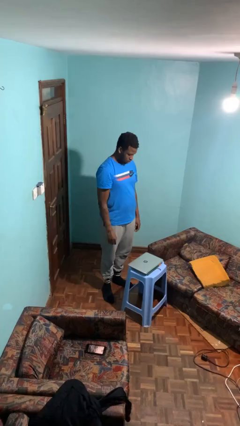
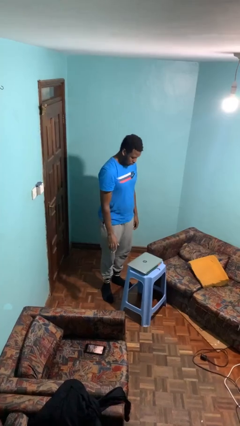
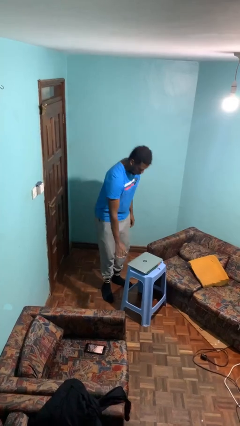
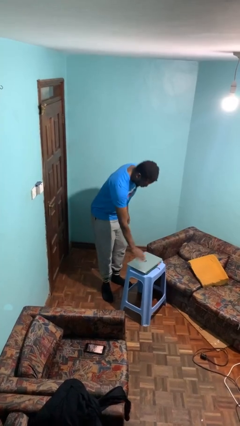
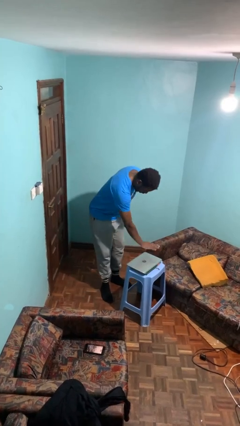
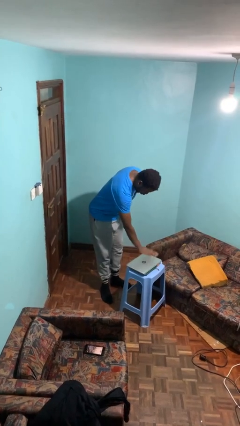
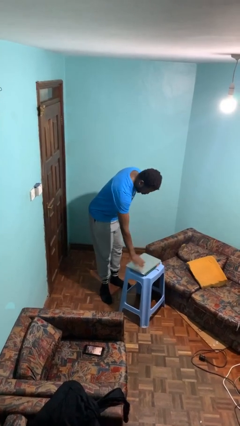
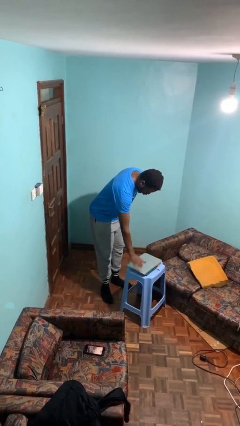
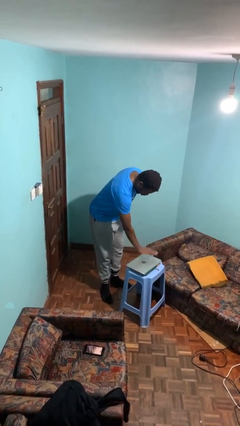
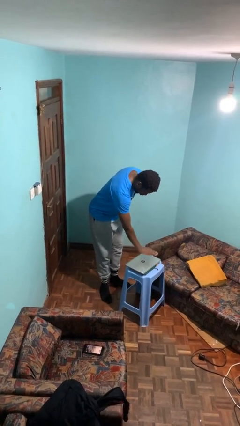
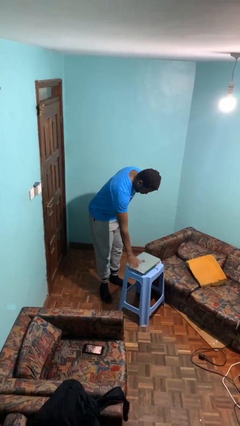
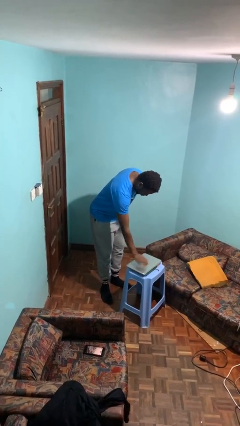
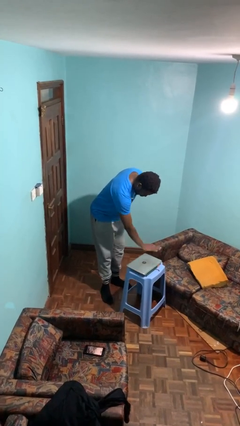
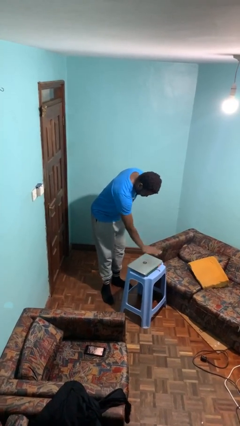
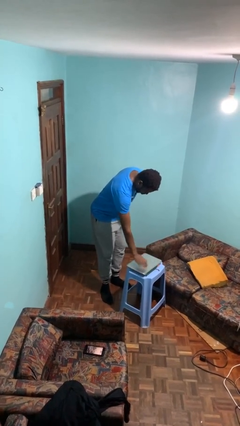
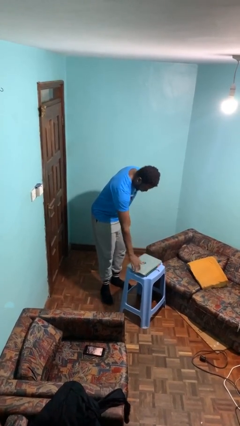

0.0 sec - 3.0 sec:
person waves hand over object

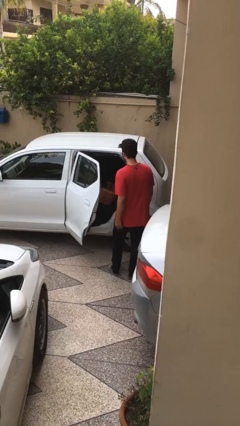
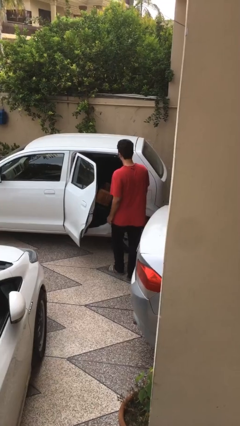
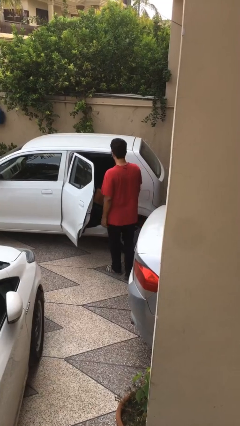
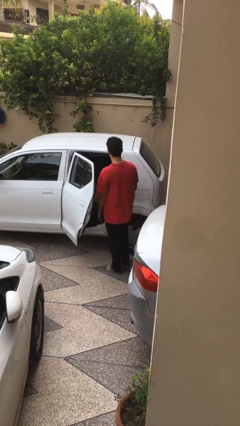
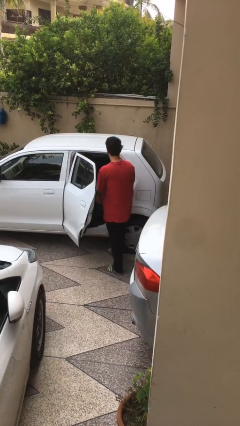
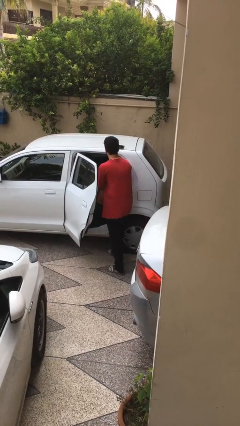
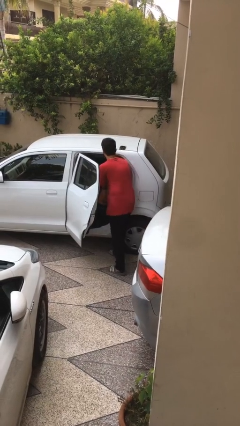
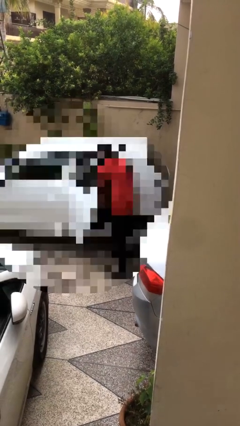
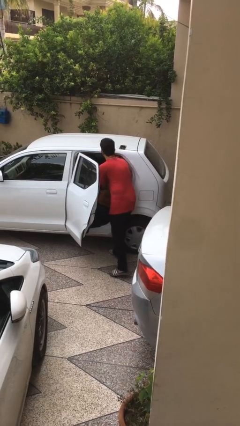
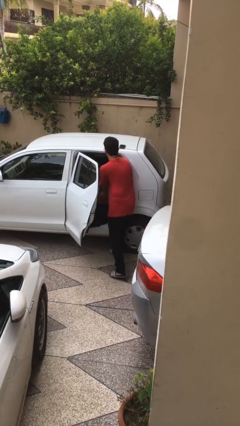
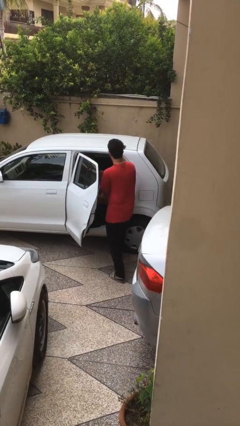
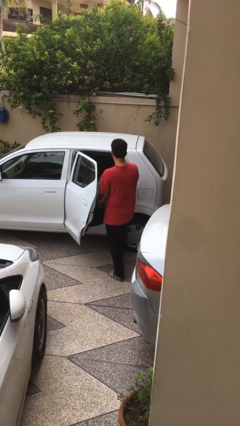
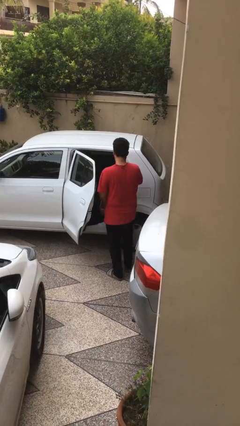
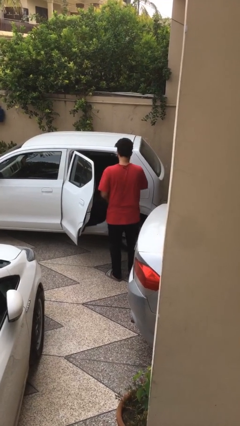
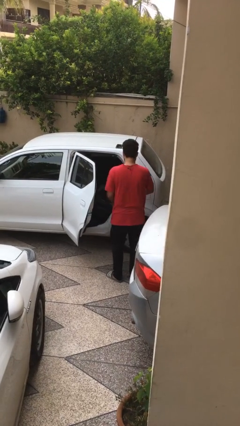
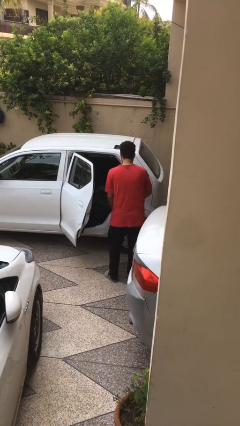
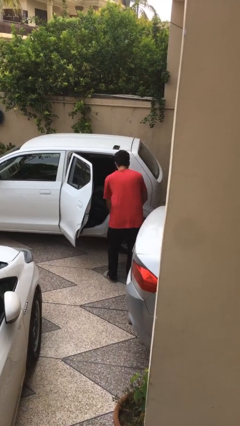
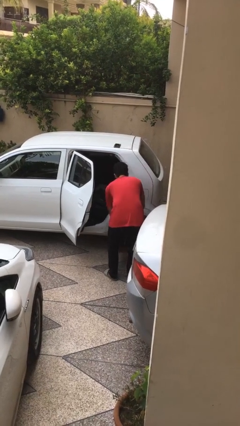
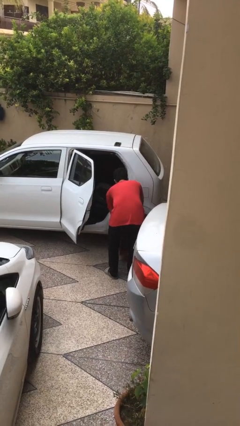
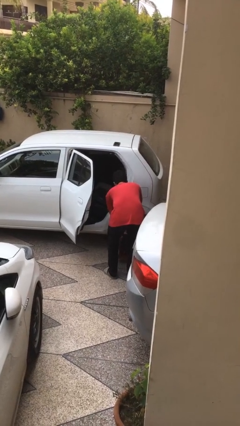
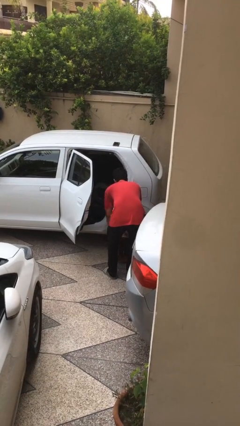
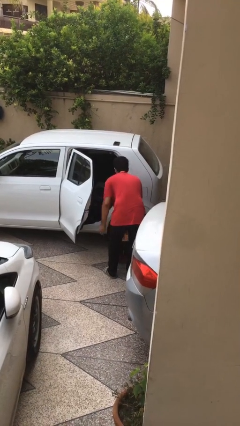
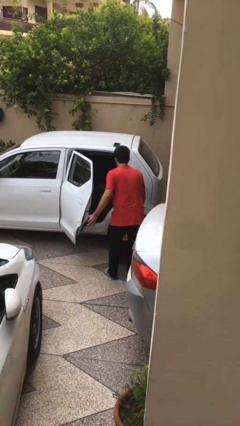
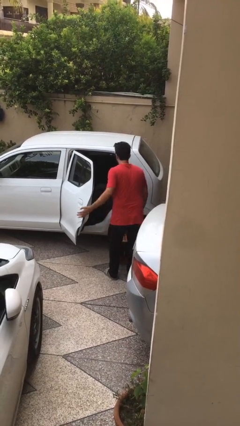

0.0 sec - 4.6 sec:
person unloads car

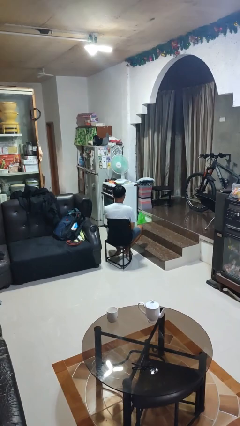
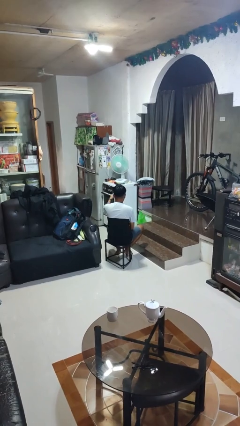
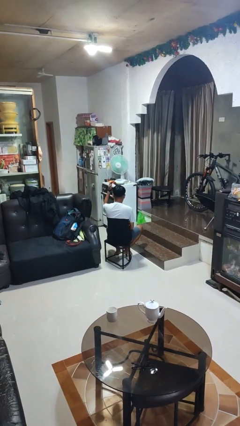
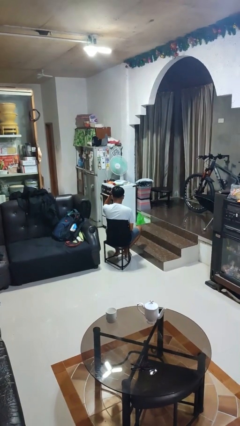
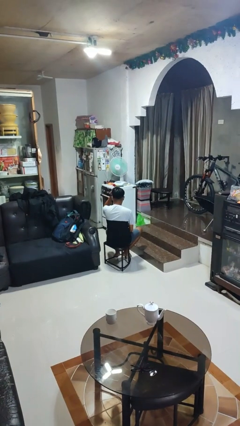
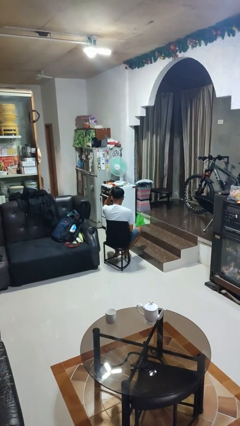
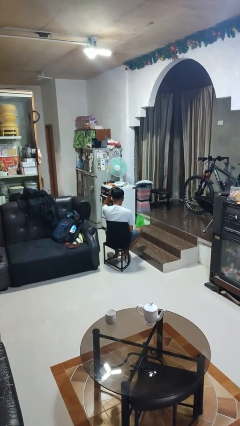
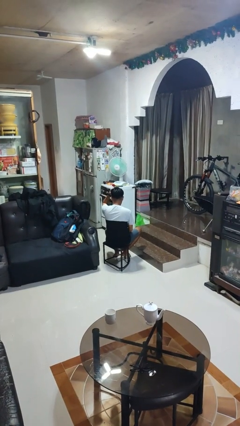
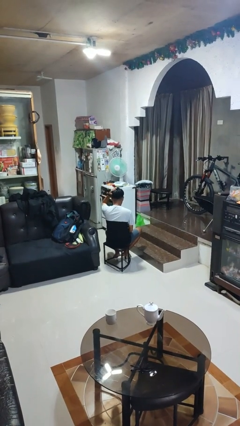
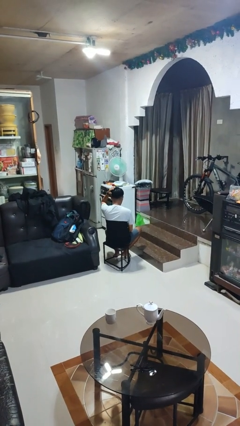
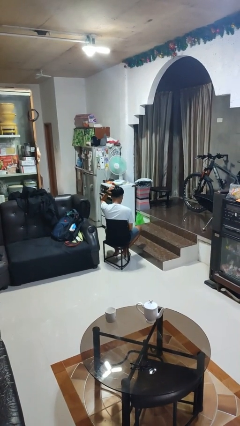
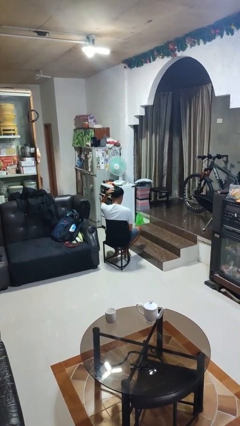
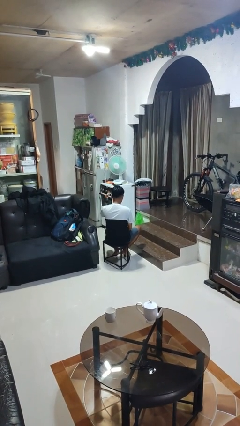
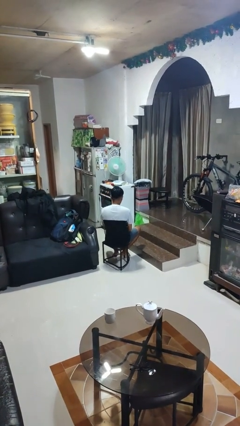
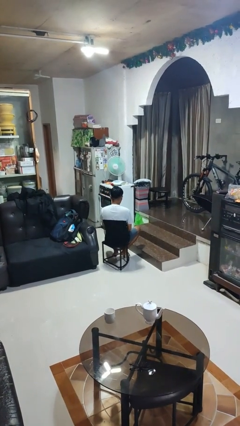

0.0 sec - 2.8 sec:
person pats head

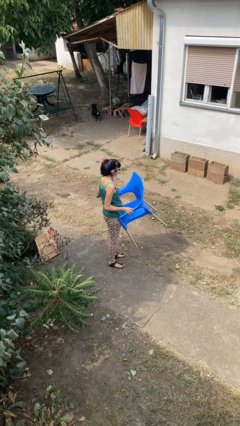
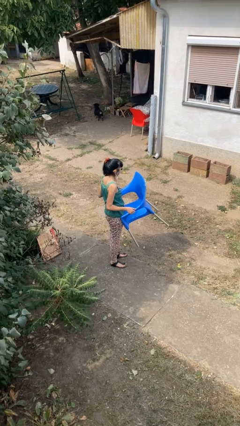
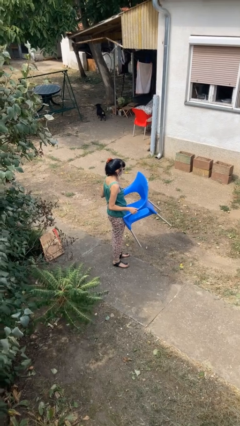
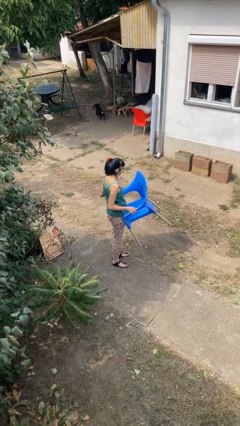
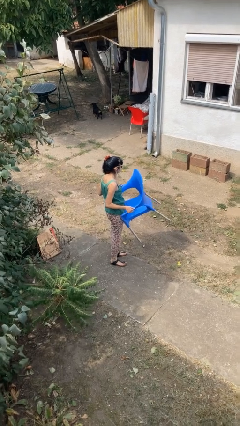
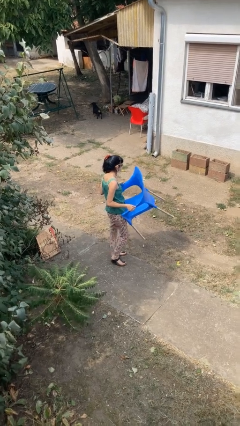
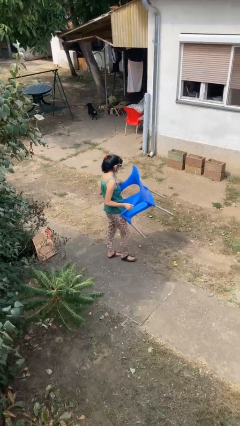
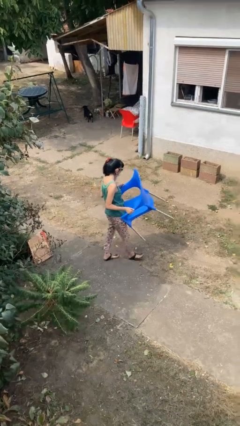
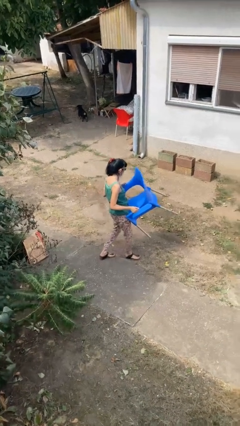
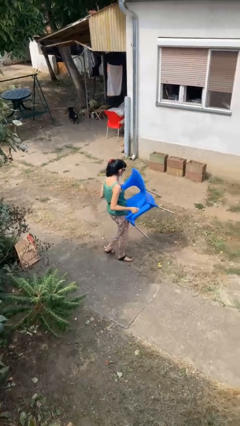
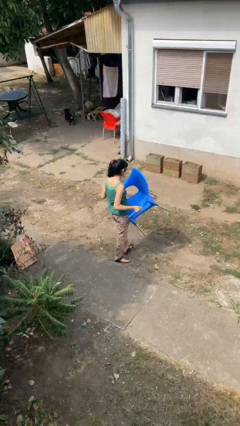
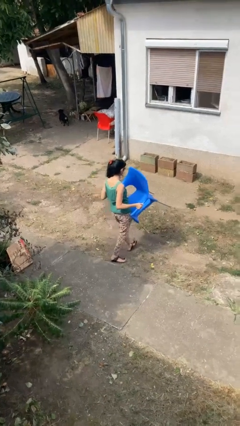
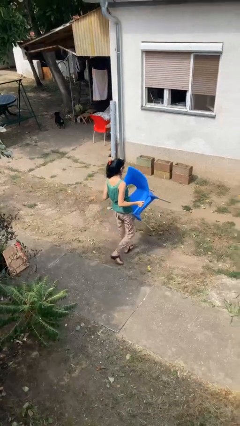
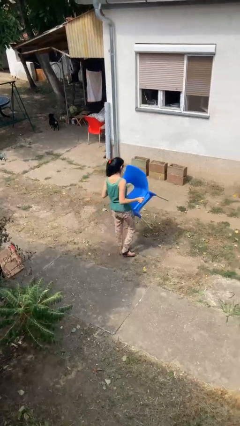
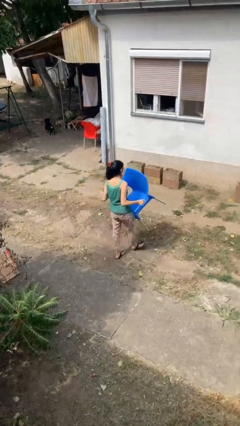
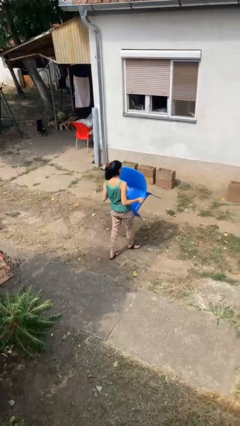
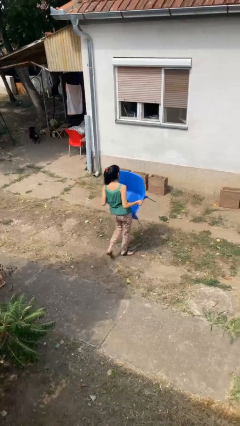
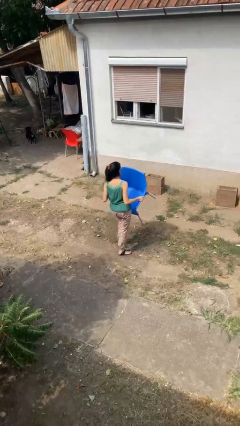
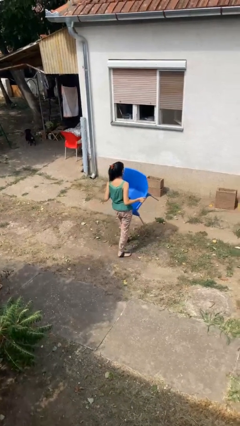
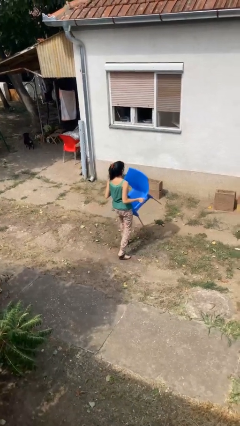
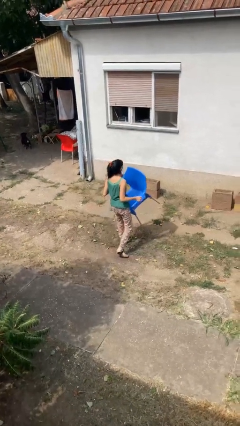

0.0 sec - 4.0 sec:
person carries furniture

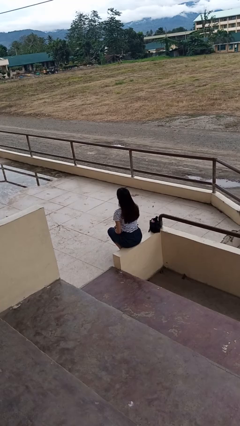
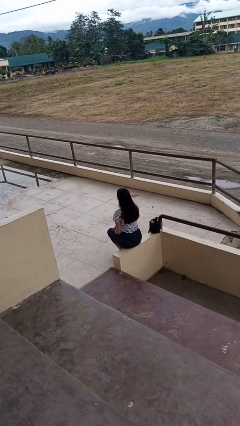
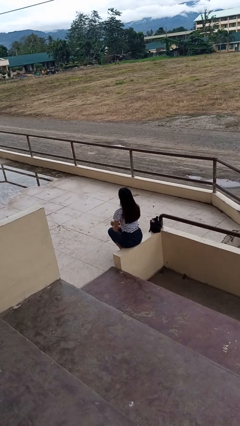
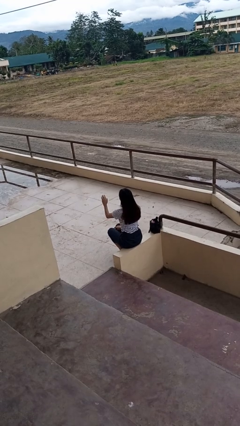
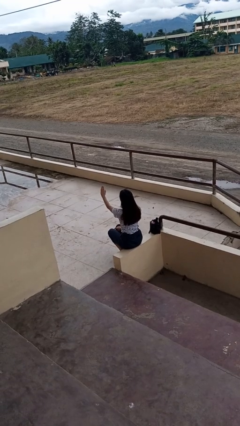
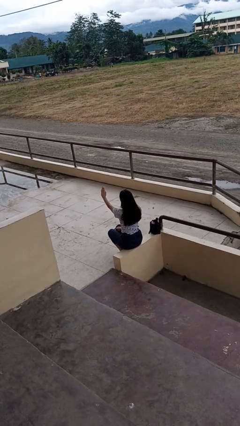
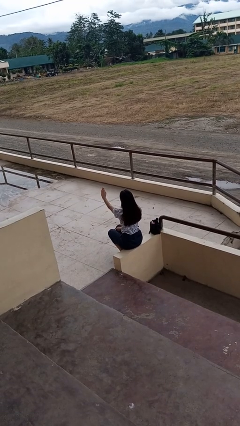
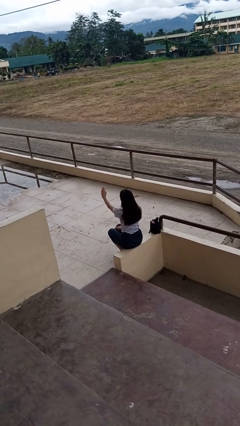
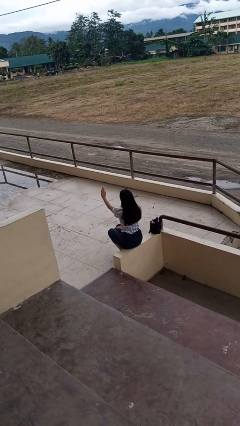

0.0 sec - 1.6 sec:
person gestures stop

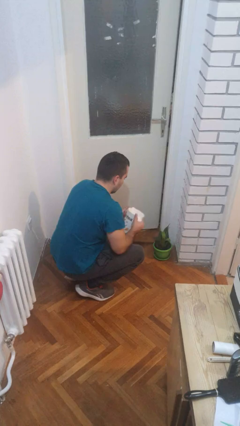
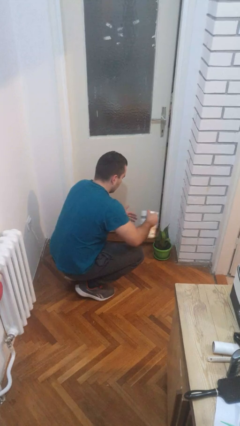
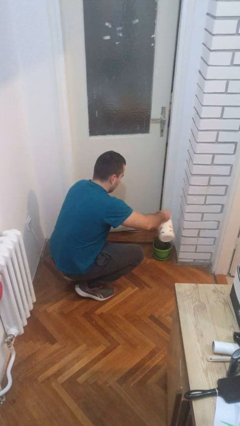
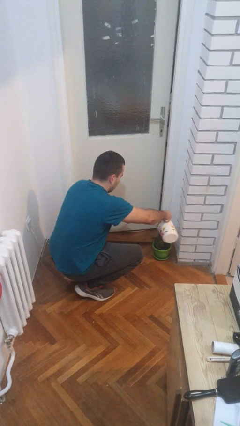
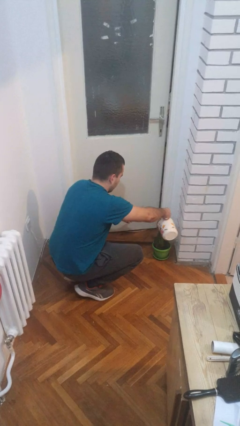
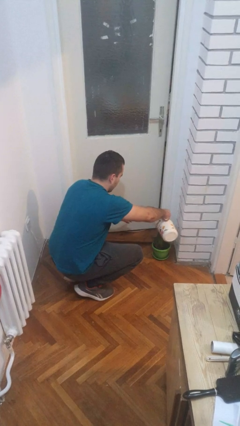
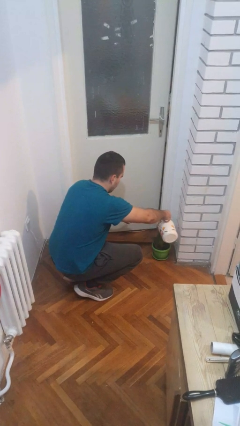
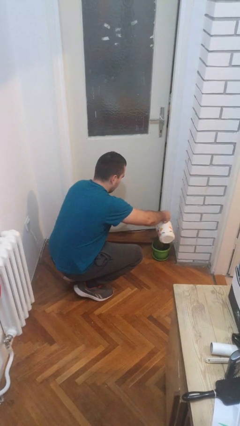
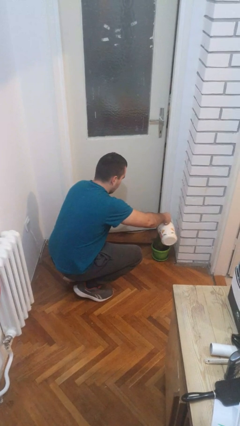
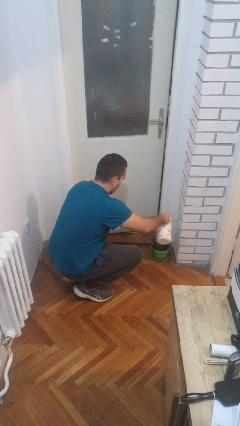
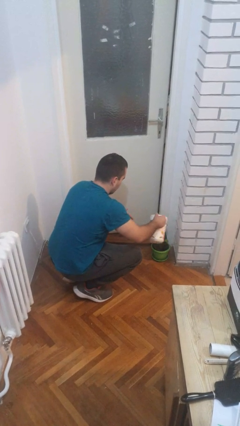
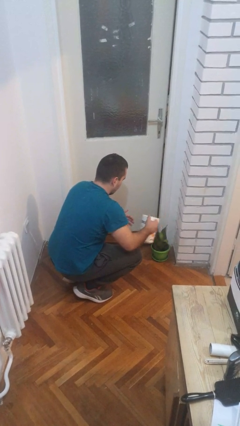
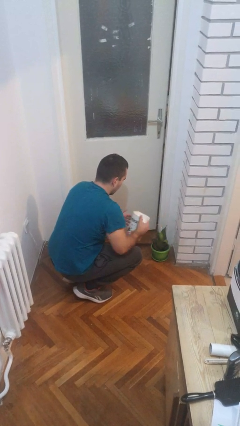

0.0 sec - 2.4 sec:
person waters houseplant
